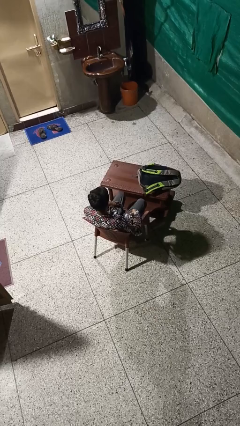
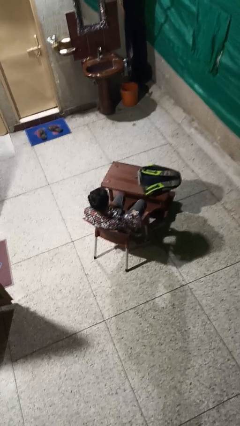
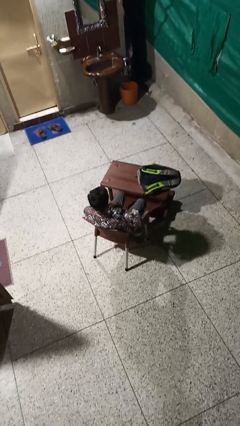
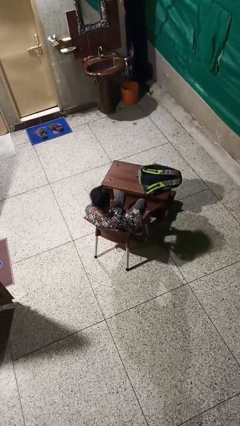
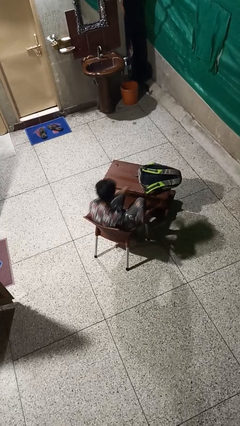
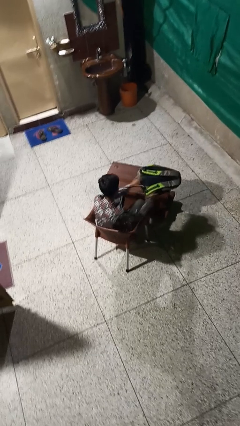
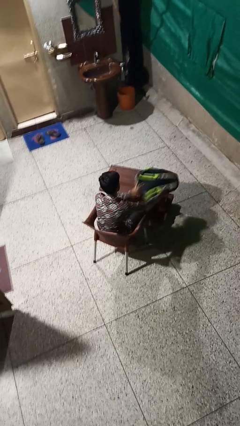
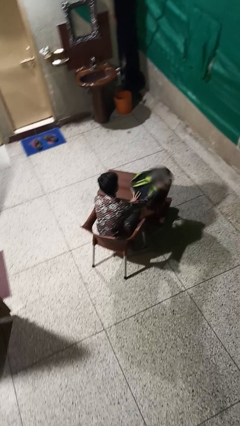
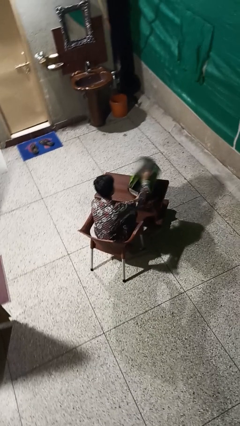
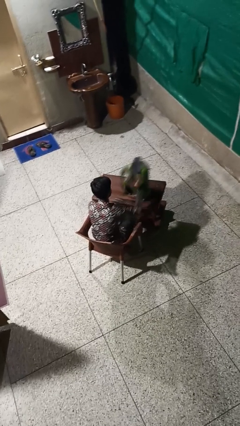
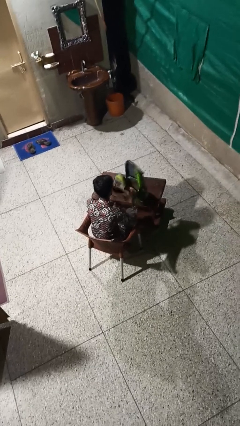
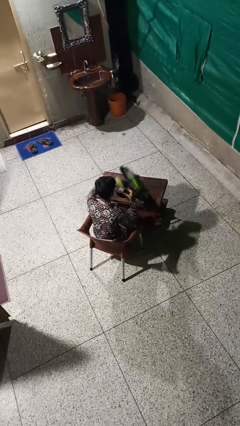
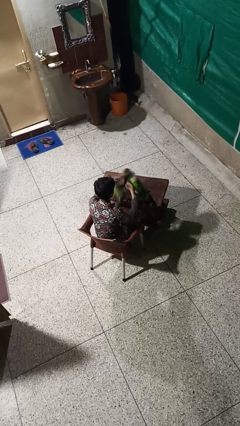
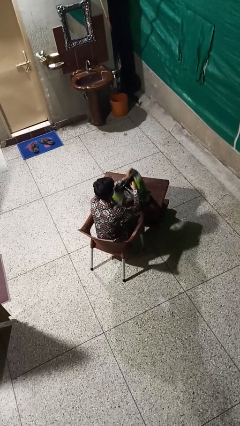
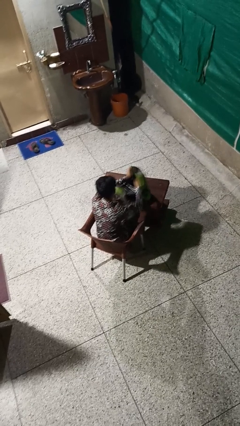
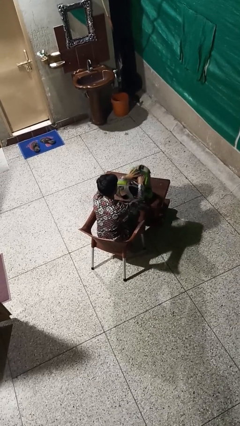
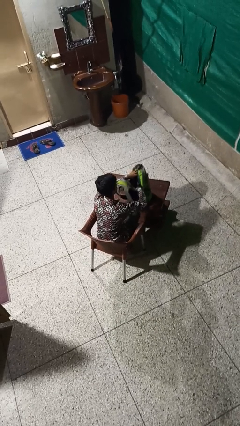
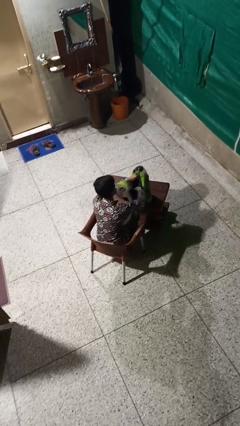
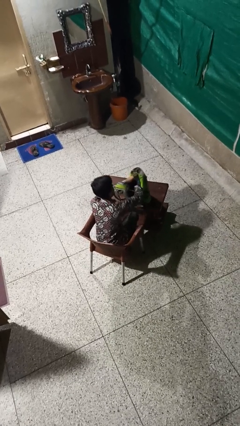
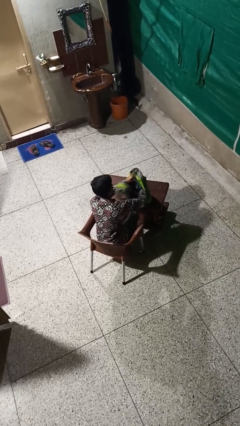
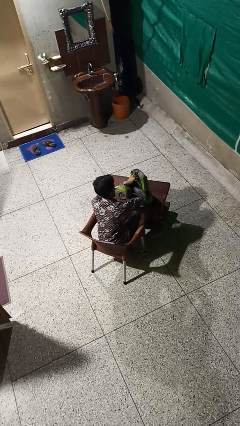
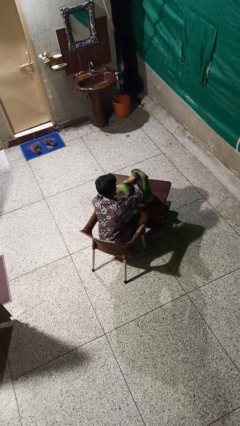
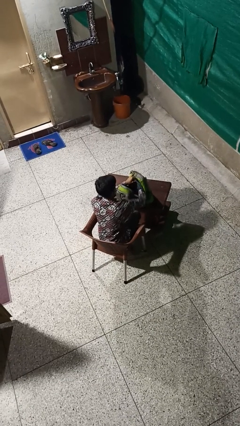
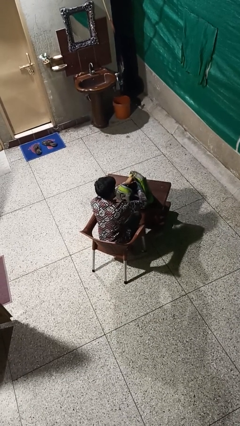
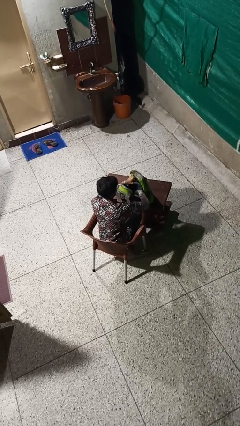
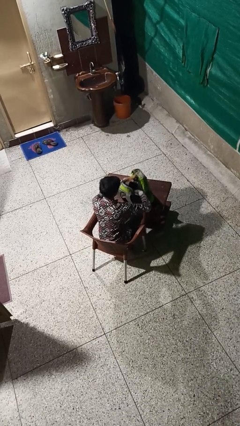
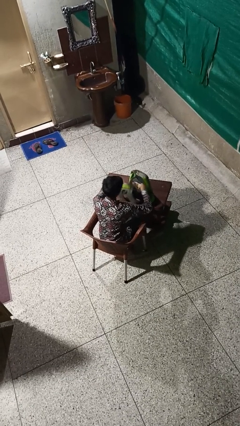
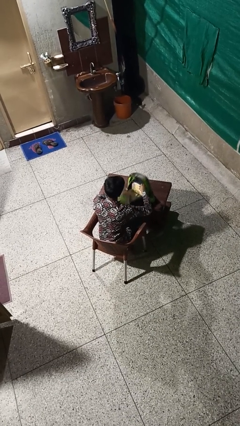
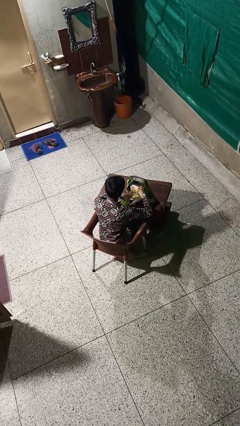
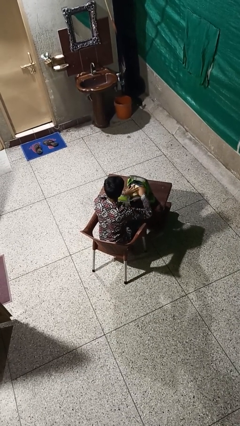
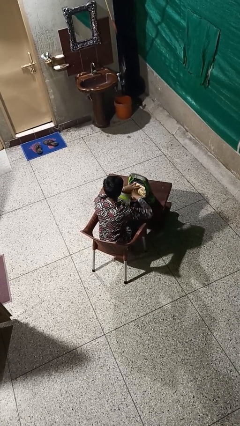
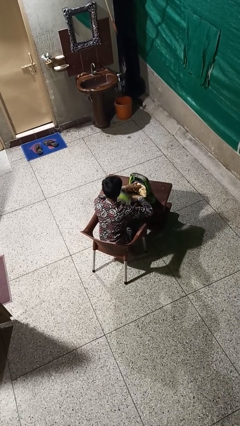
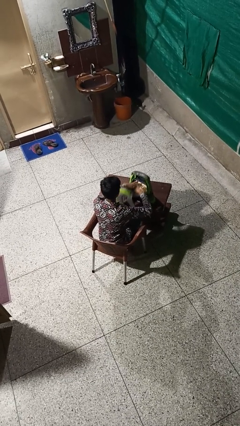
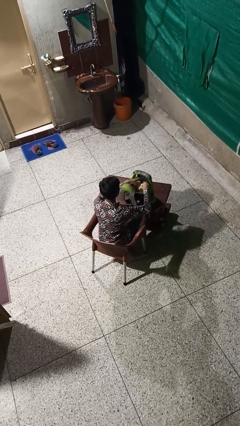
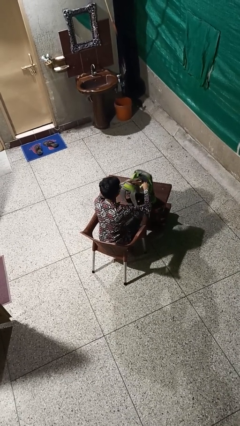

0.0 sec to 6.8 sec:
person searches in backpack

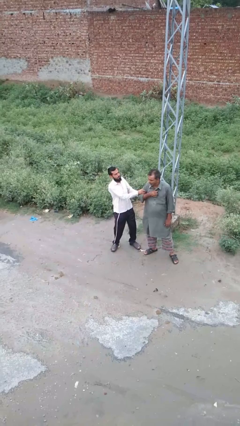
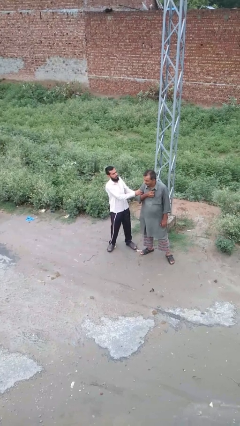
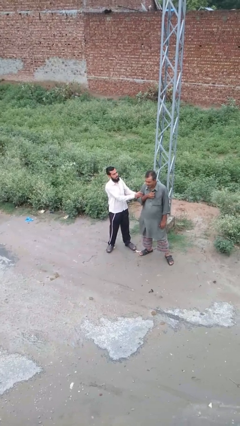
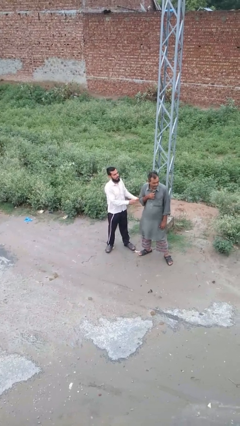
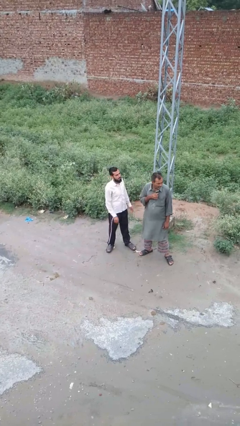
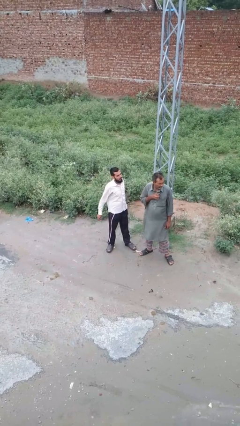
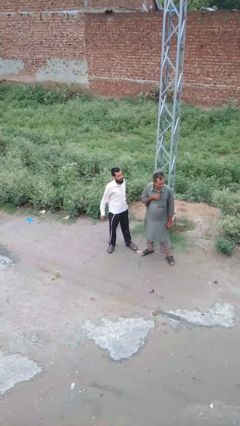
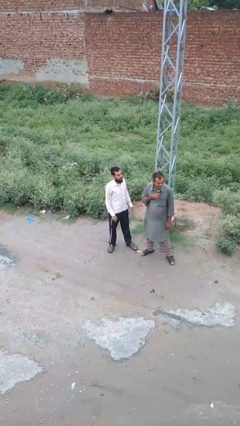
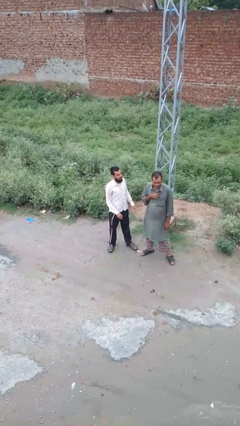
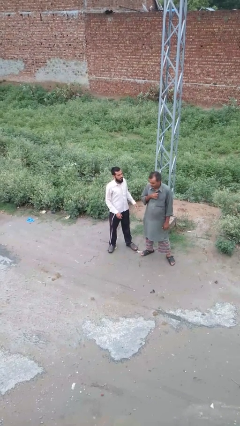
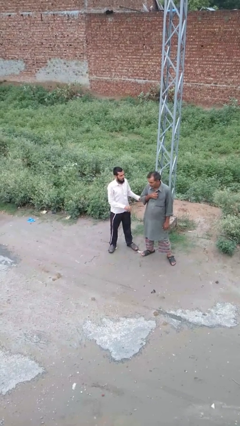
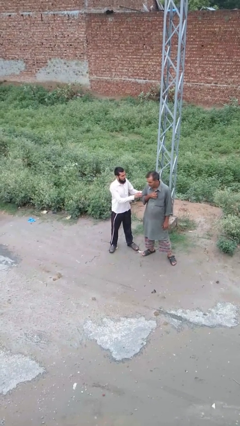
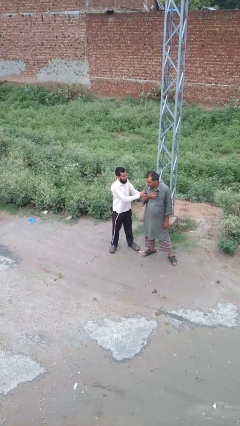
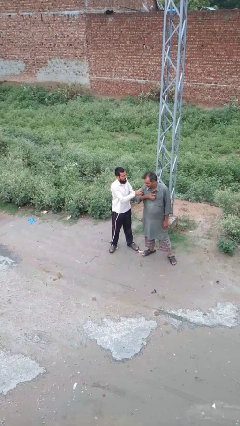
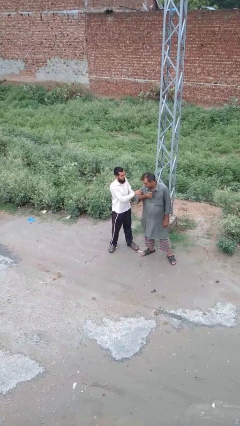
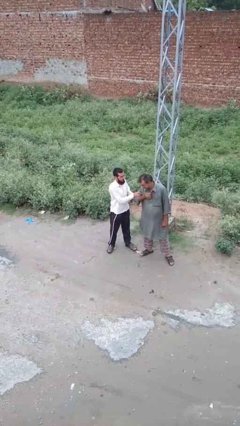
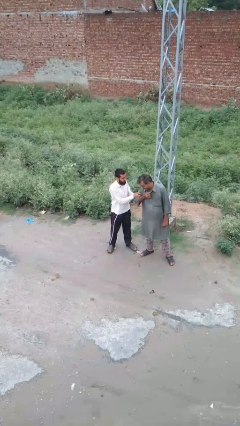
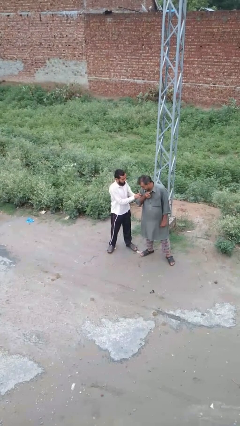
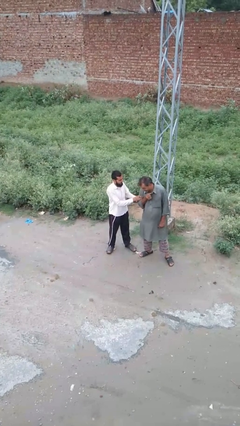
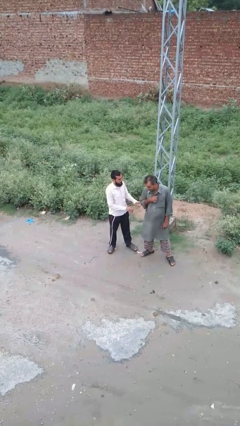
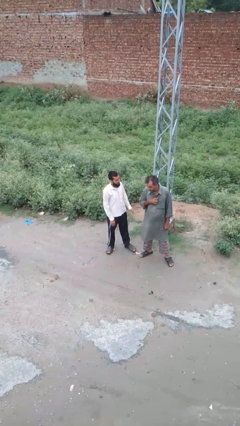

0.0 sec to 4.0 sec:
person grabs person by bicep

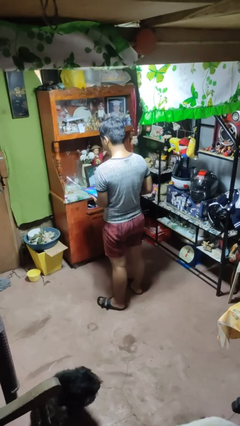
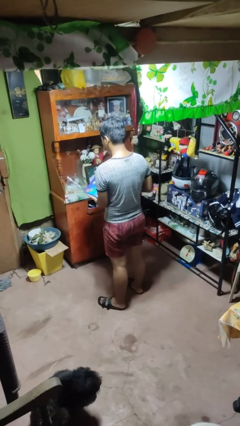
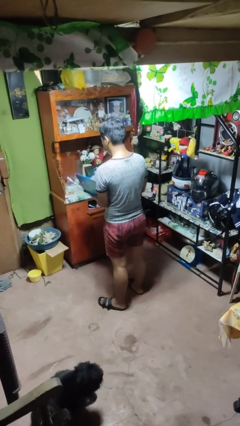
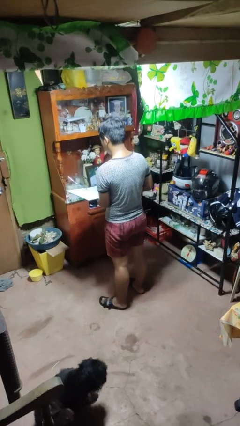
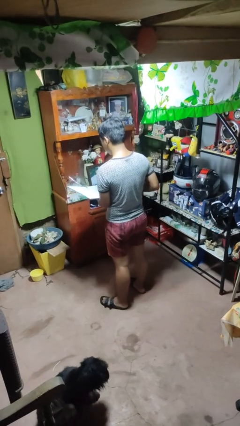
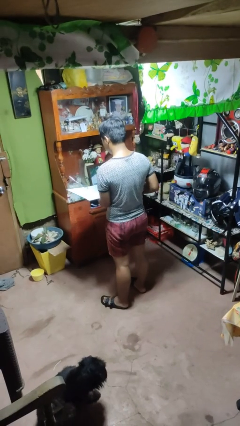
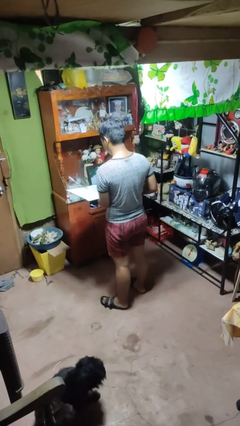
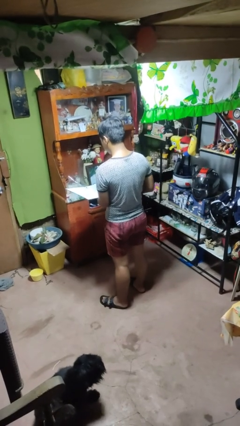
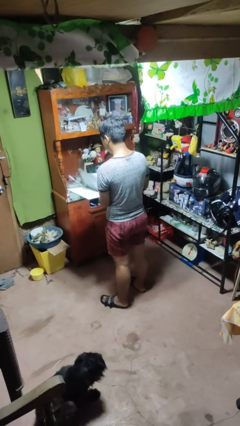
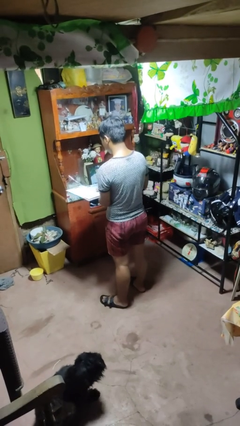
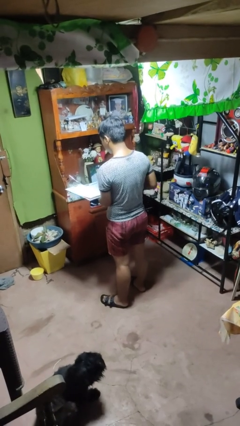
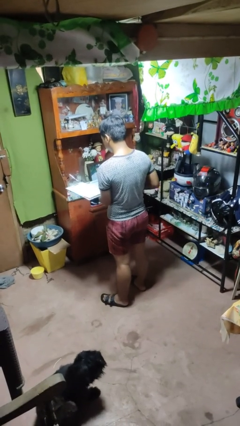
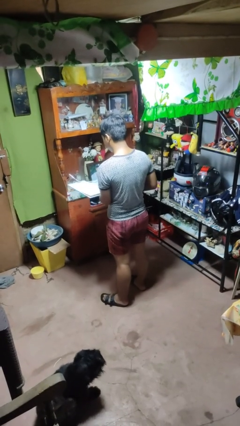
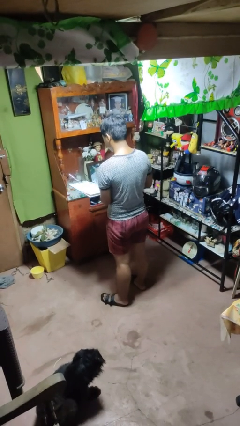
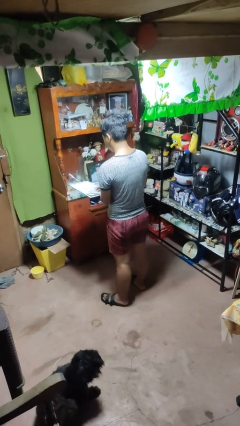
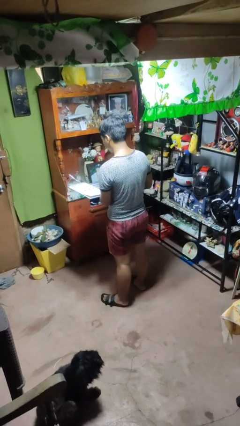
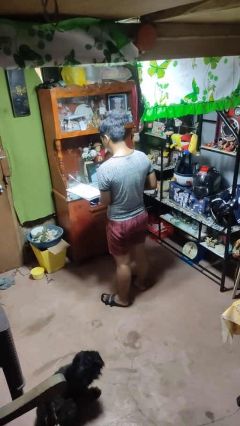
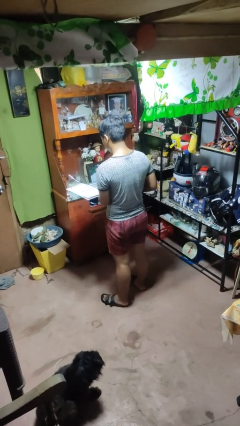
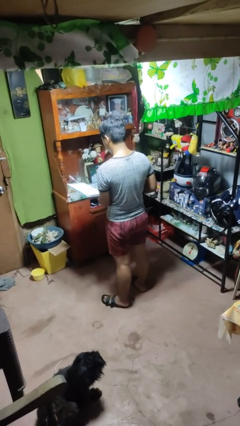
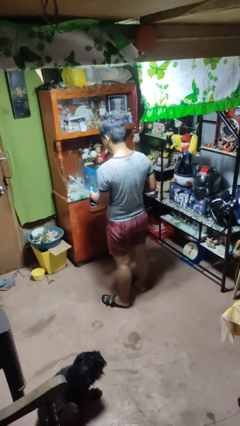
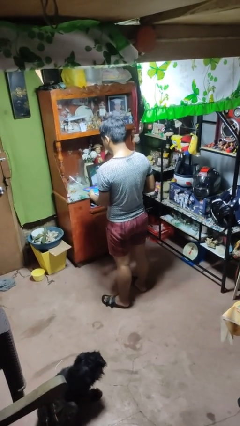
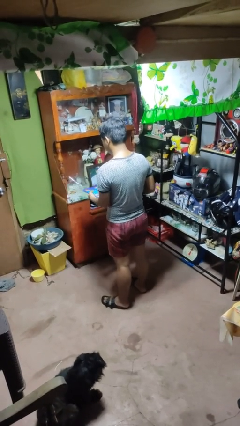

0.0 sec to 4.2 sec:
person reads magazine

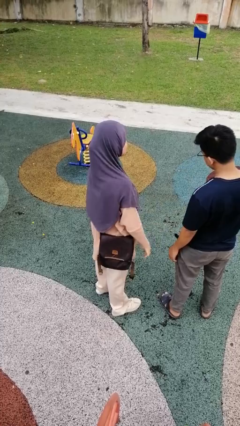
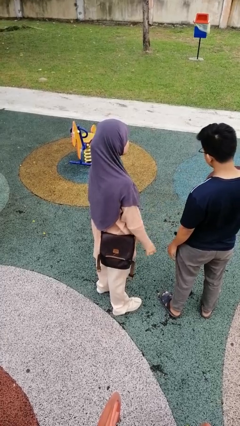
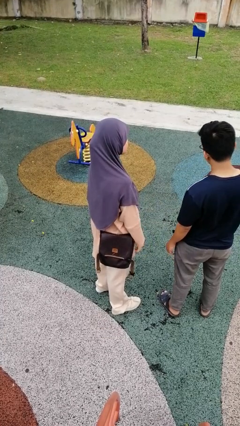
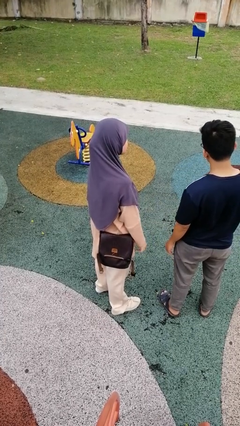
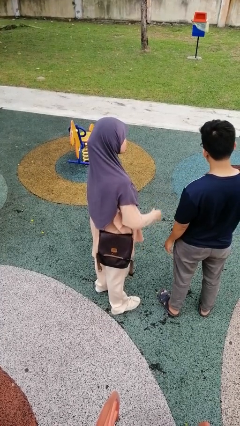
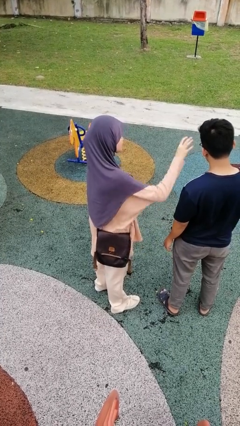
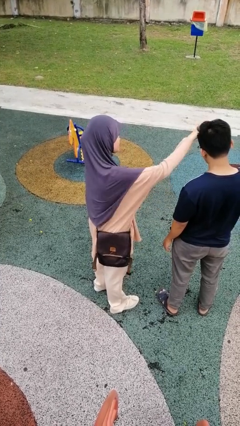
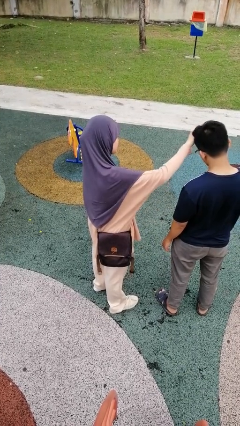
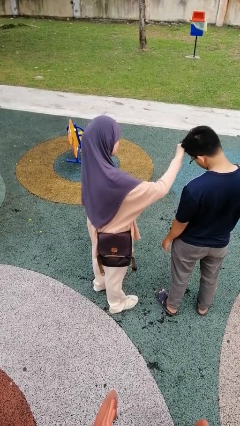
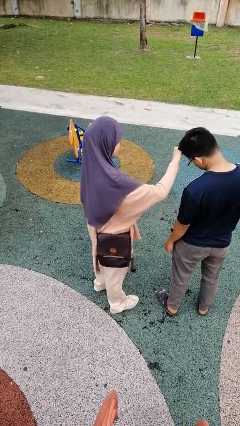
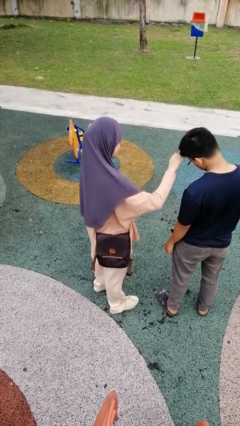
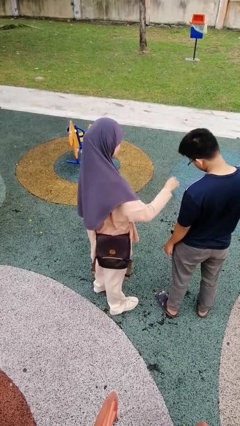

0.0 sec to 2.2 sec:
person grabs person by hair

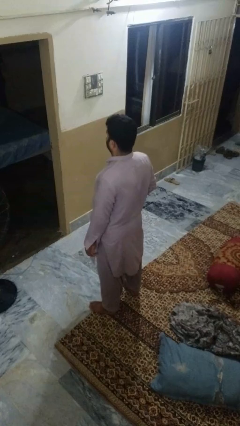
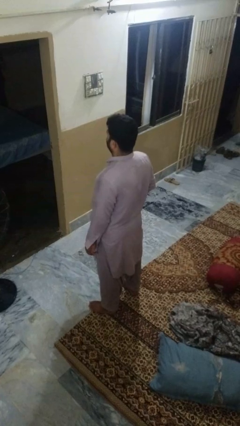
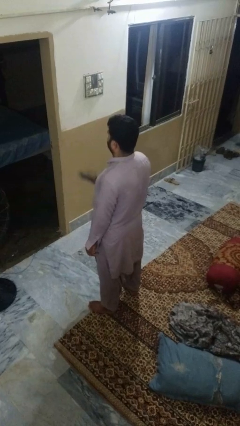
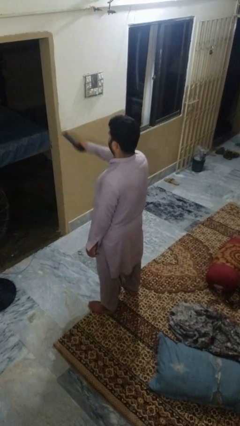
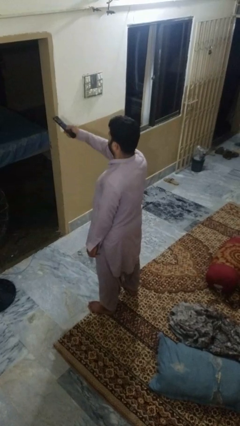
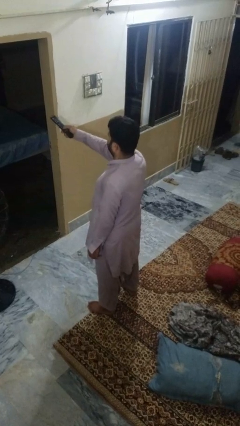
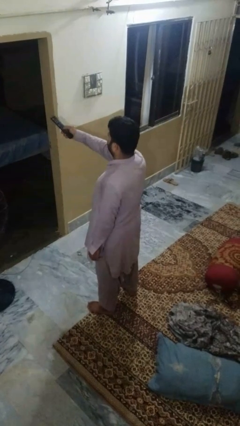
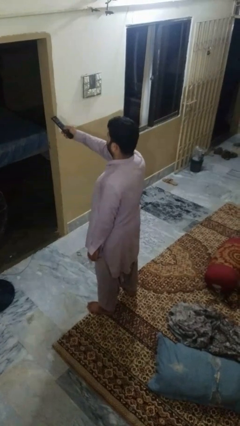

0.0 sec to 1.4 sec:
person uses television remote
